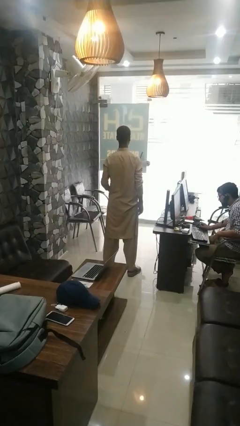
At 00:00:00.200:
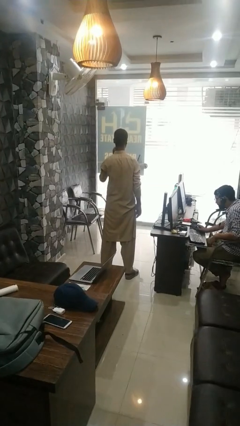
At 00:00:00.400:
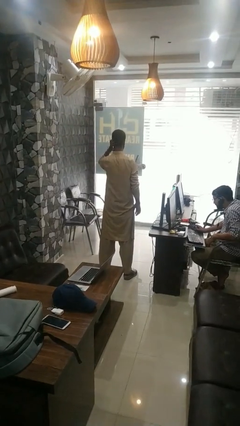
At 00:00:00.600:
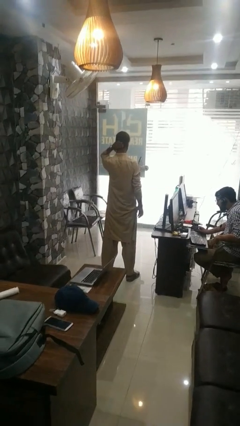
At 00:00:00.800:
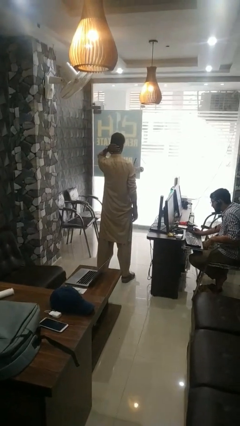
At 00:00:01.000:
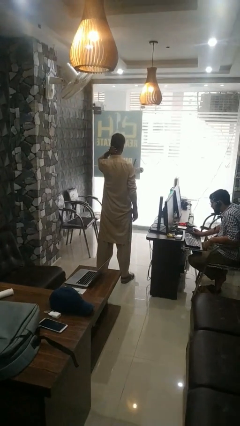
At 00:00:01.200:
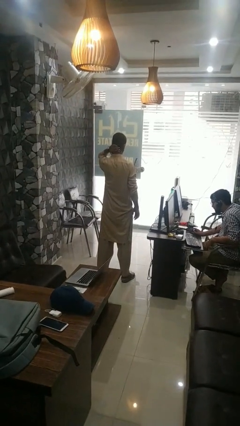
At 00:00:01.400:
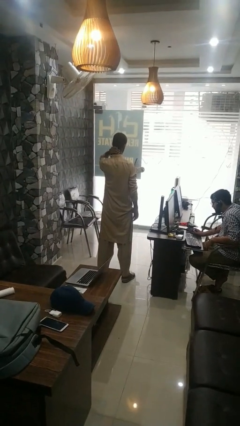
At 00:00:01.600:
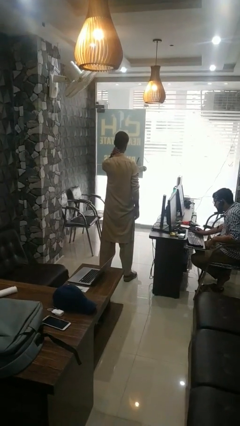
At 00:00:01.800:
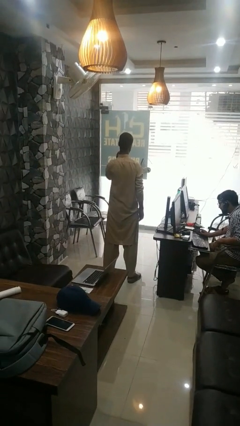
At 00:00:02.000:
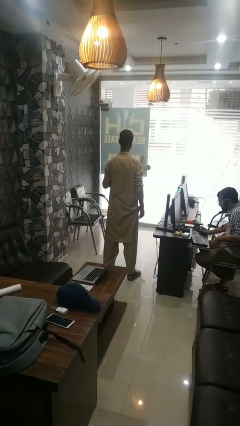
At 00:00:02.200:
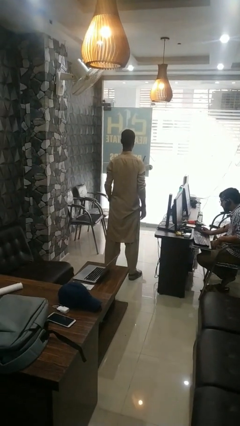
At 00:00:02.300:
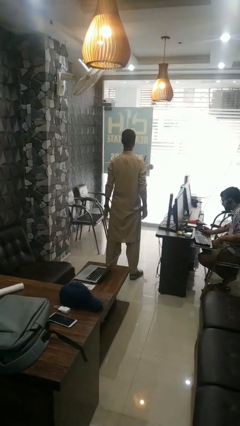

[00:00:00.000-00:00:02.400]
person rubs neck

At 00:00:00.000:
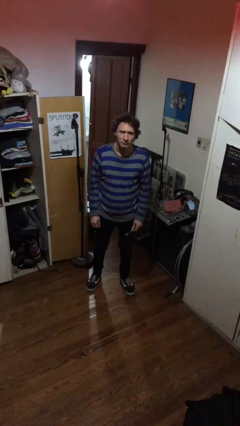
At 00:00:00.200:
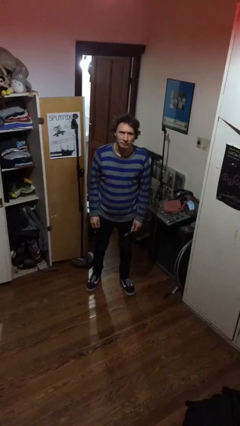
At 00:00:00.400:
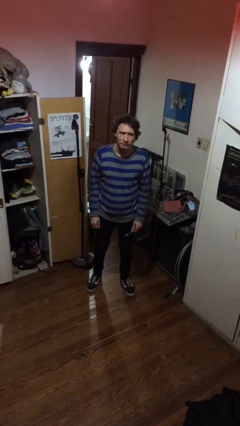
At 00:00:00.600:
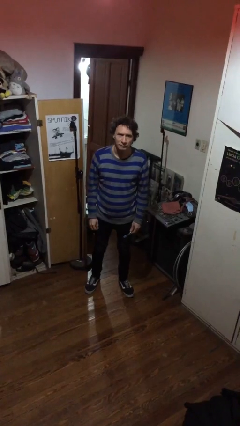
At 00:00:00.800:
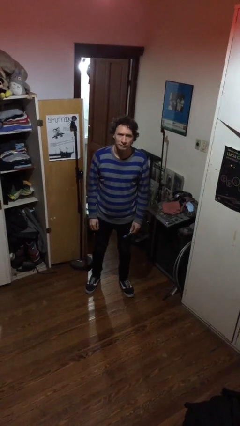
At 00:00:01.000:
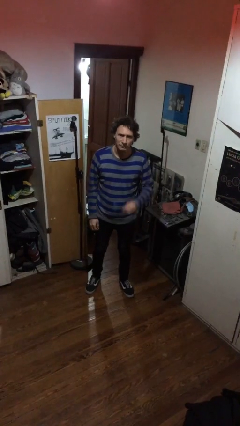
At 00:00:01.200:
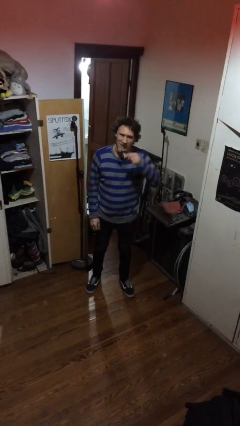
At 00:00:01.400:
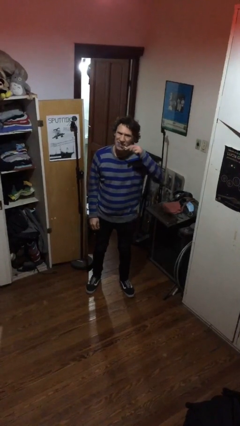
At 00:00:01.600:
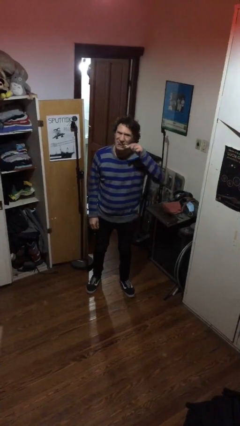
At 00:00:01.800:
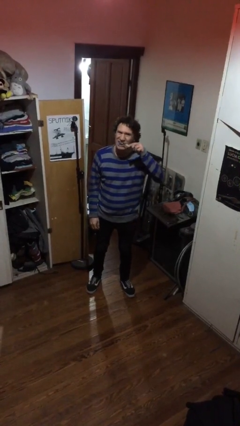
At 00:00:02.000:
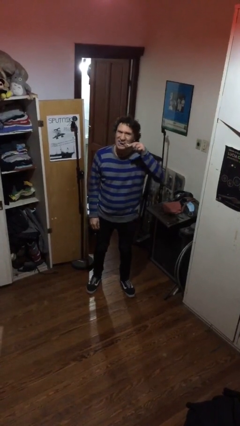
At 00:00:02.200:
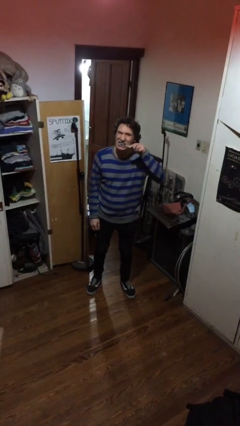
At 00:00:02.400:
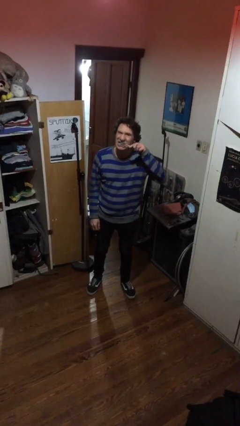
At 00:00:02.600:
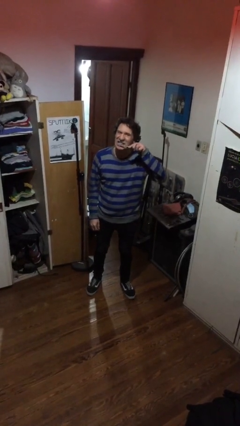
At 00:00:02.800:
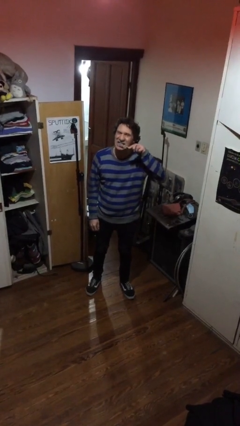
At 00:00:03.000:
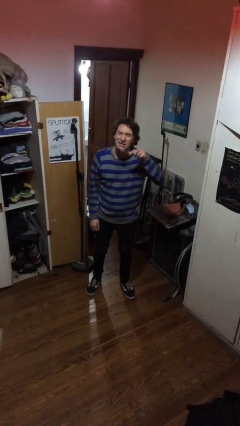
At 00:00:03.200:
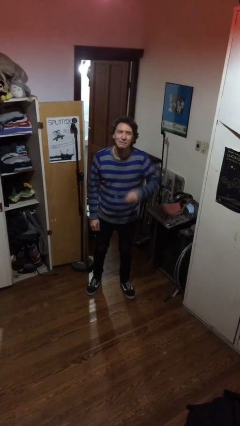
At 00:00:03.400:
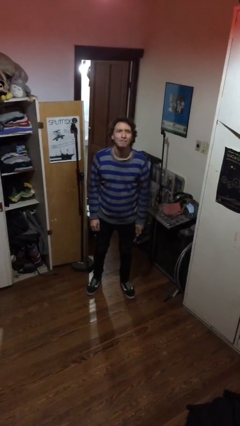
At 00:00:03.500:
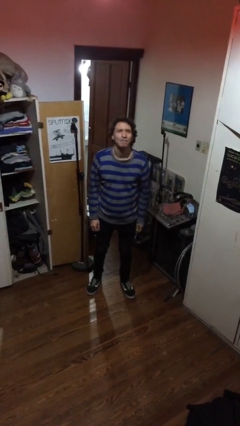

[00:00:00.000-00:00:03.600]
person brushes teeth

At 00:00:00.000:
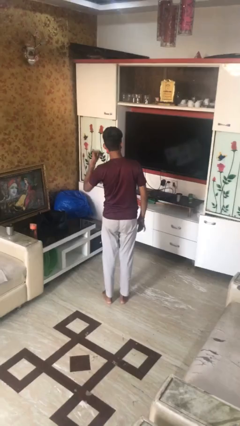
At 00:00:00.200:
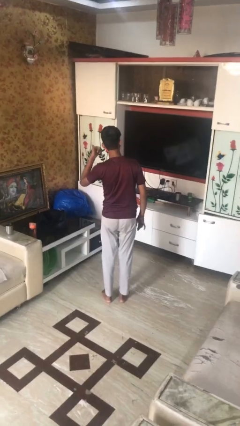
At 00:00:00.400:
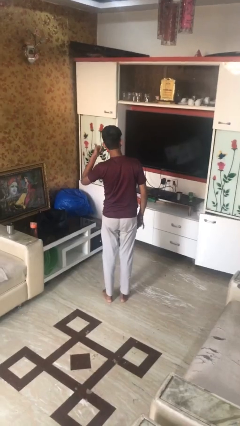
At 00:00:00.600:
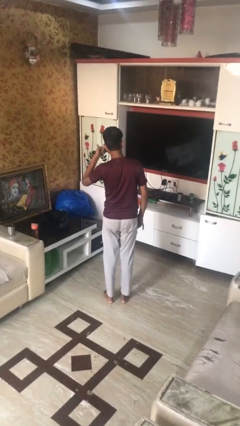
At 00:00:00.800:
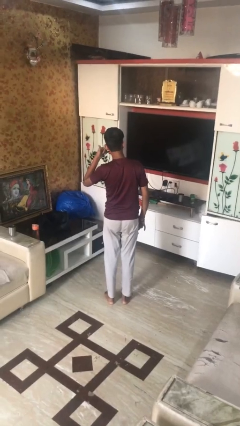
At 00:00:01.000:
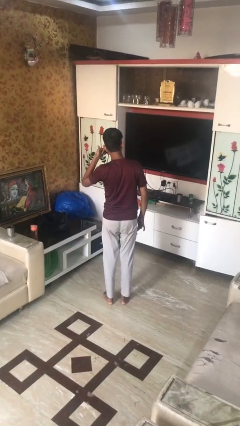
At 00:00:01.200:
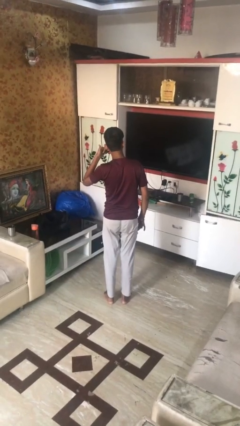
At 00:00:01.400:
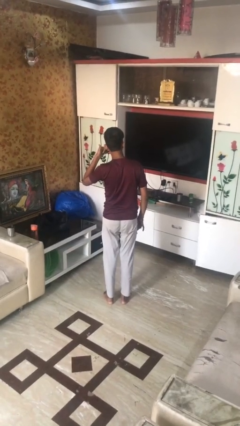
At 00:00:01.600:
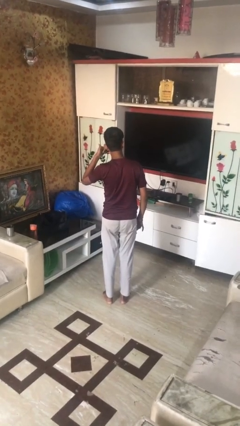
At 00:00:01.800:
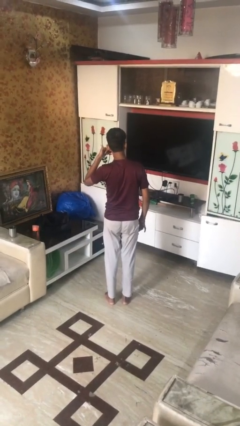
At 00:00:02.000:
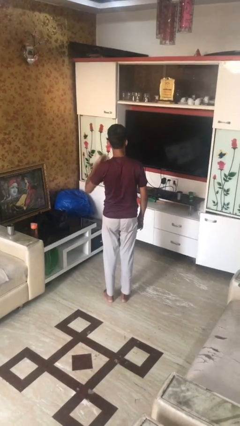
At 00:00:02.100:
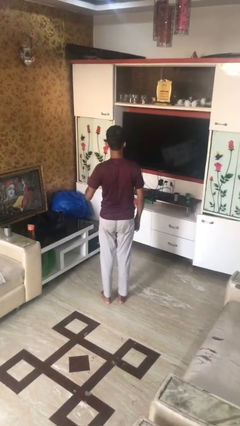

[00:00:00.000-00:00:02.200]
person gestures call me

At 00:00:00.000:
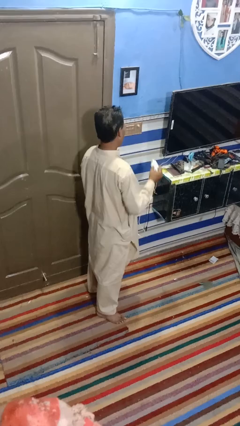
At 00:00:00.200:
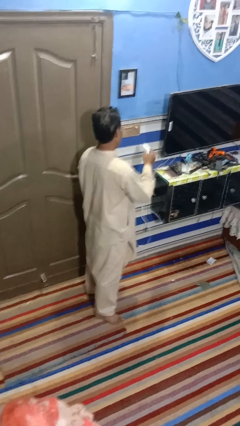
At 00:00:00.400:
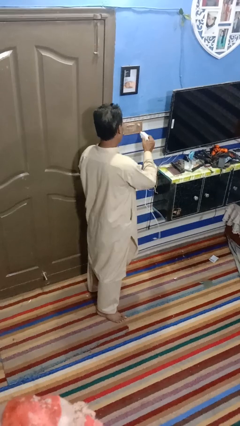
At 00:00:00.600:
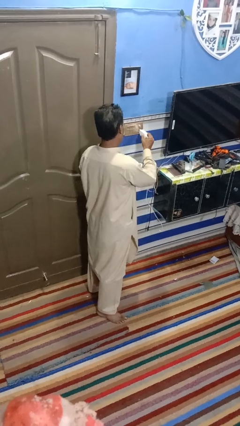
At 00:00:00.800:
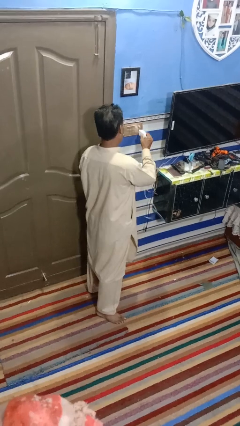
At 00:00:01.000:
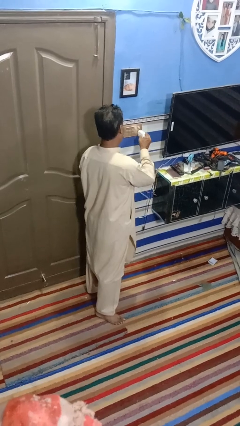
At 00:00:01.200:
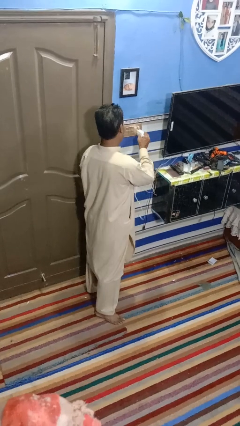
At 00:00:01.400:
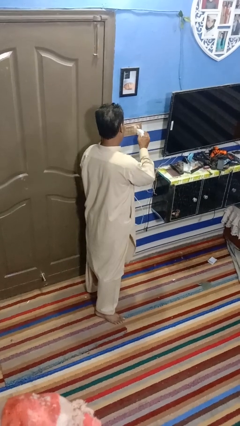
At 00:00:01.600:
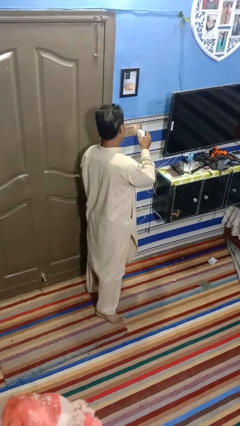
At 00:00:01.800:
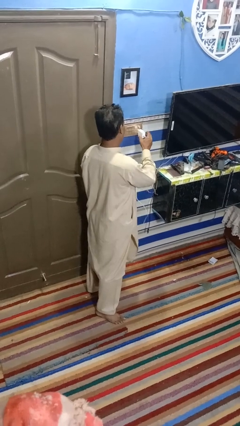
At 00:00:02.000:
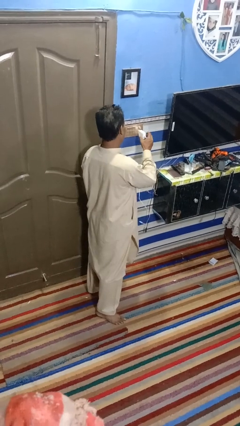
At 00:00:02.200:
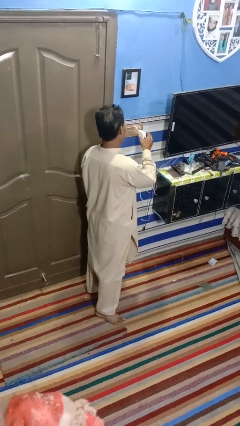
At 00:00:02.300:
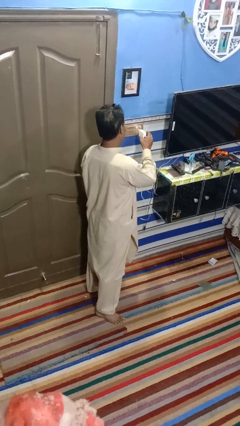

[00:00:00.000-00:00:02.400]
person plugs into electrical socket

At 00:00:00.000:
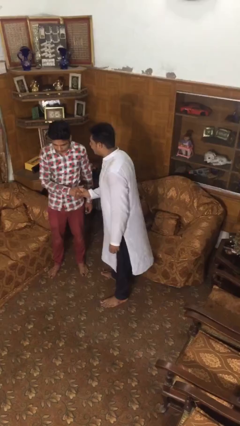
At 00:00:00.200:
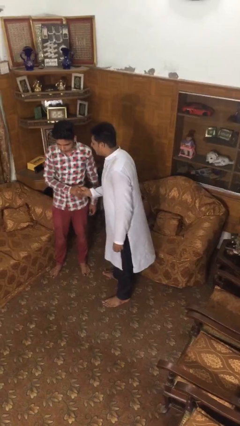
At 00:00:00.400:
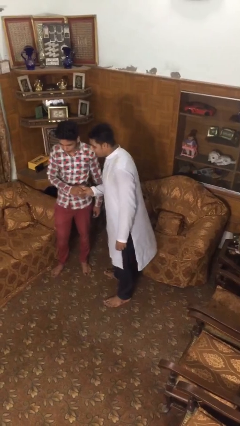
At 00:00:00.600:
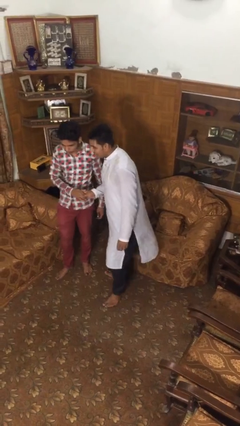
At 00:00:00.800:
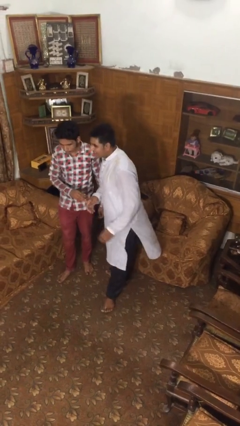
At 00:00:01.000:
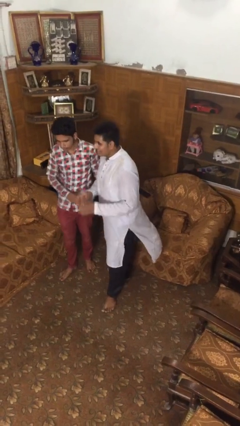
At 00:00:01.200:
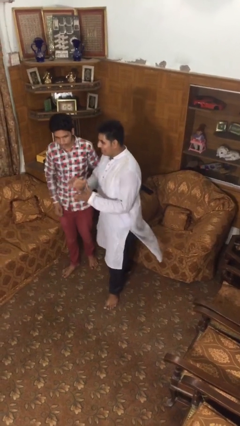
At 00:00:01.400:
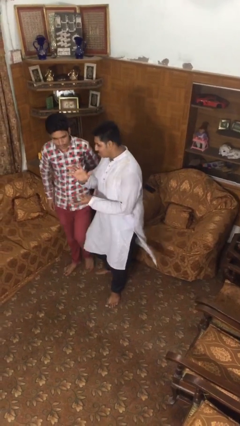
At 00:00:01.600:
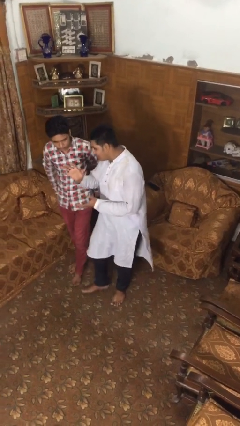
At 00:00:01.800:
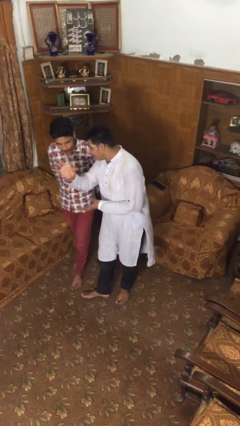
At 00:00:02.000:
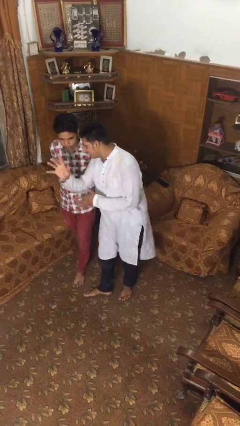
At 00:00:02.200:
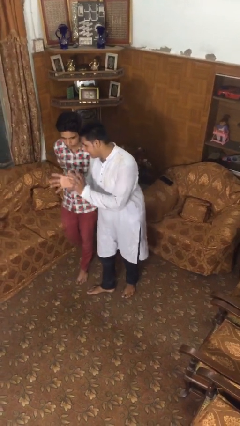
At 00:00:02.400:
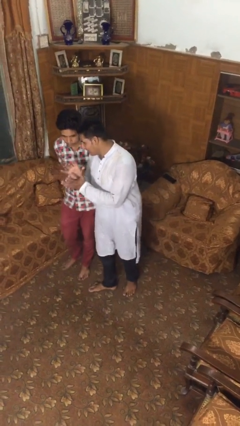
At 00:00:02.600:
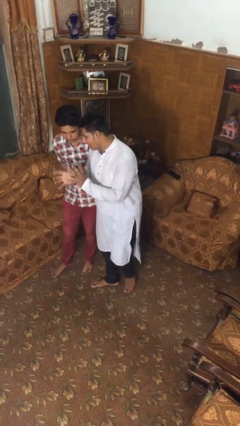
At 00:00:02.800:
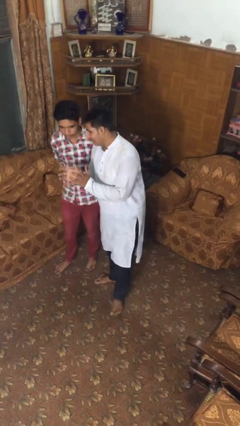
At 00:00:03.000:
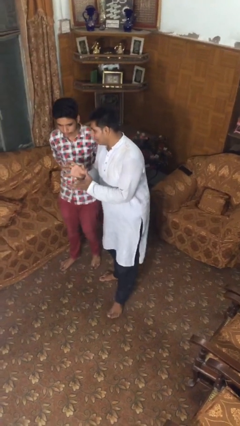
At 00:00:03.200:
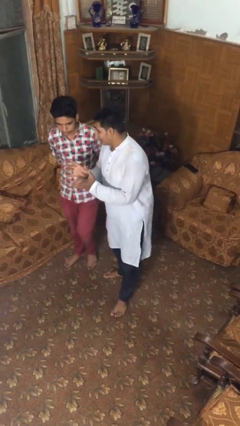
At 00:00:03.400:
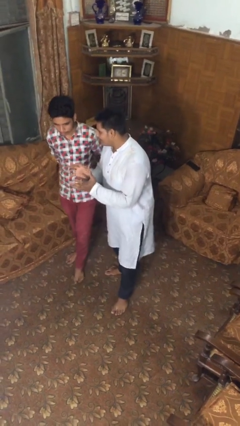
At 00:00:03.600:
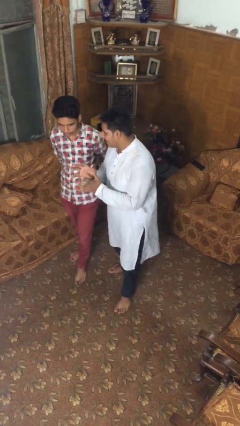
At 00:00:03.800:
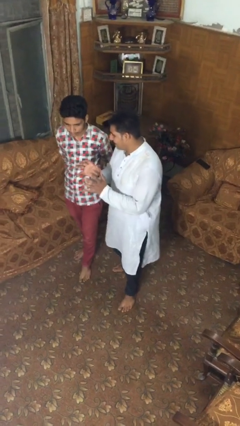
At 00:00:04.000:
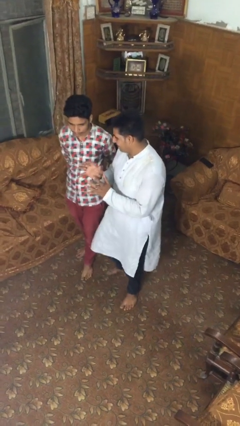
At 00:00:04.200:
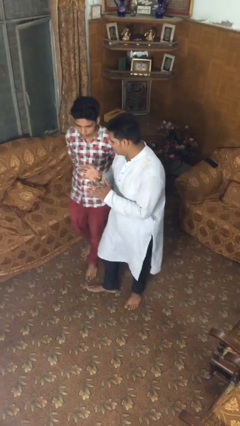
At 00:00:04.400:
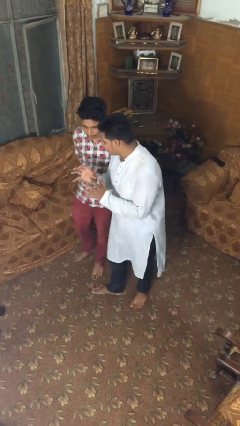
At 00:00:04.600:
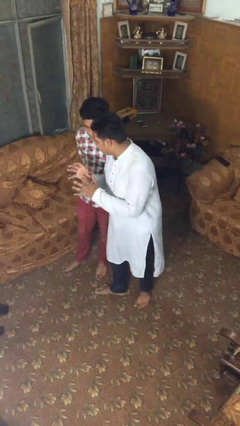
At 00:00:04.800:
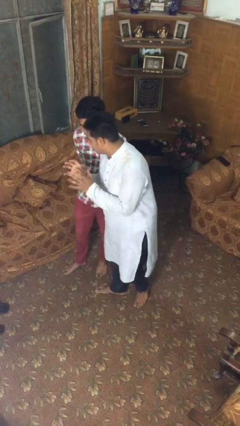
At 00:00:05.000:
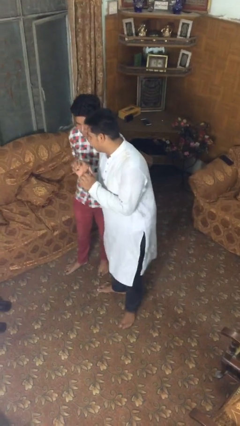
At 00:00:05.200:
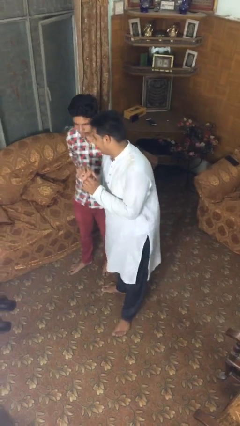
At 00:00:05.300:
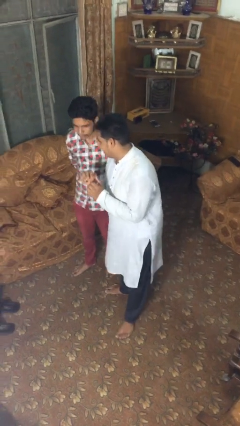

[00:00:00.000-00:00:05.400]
person talks to person

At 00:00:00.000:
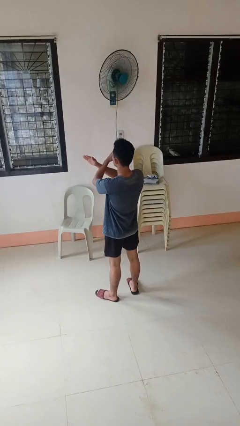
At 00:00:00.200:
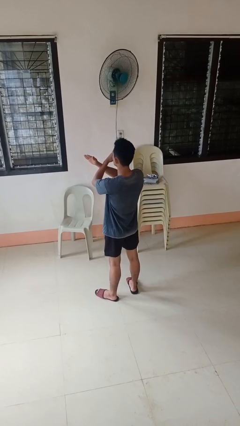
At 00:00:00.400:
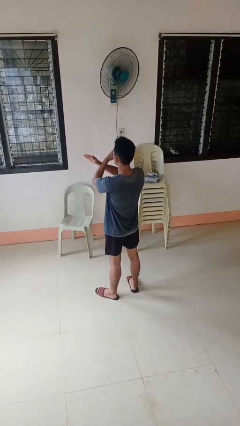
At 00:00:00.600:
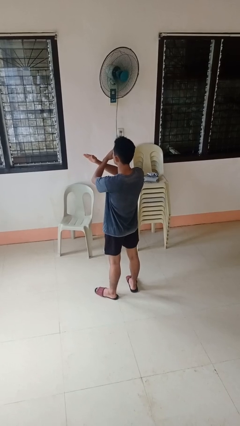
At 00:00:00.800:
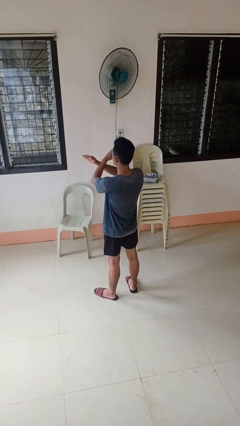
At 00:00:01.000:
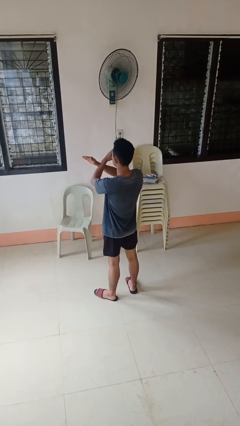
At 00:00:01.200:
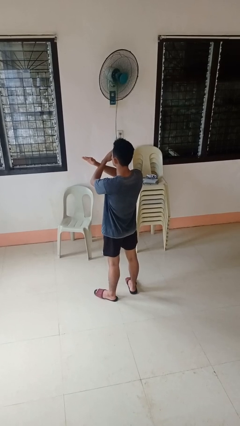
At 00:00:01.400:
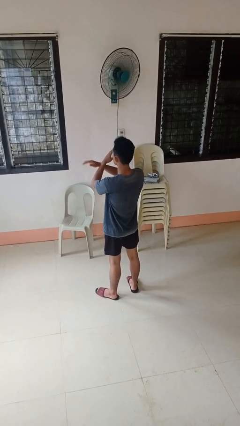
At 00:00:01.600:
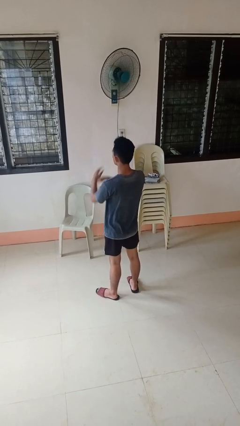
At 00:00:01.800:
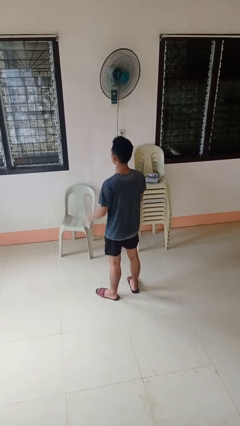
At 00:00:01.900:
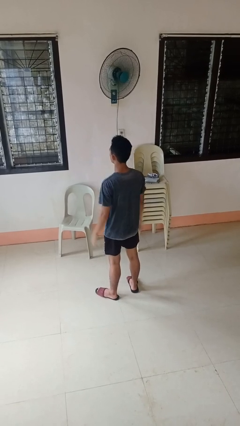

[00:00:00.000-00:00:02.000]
person gestures arms x
